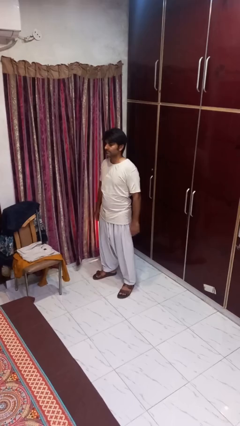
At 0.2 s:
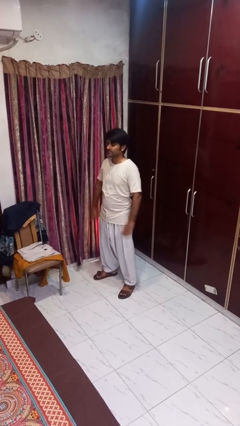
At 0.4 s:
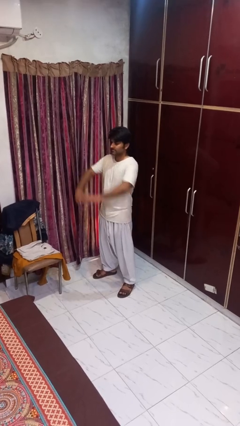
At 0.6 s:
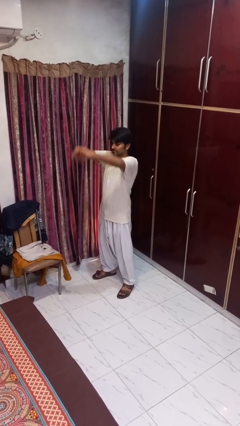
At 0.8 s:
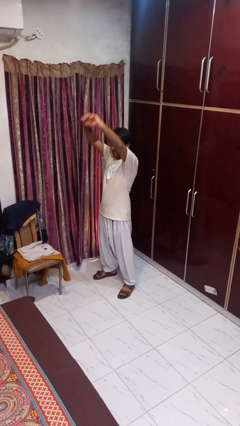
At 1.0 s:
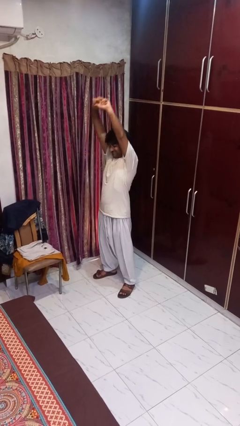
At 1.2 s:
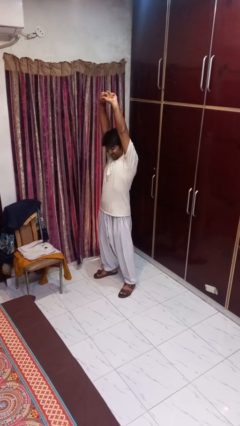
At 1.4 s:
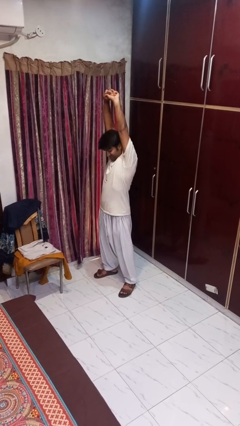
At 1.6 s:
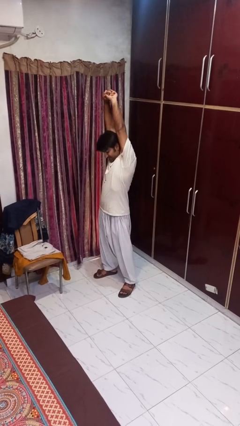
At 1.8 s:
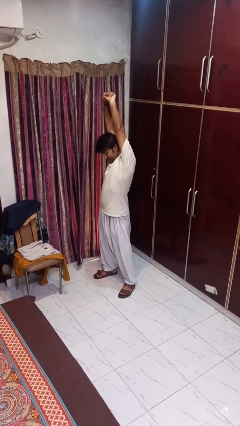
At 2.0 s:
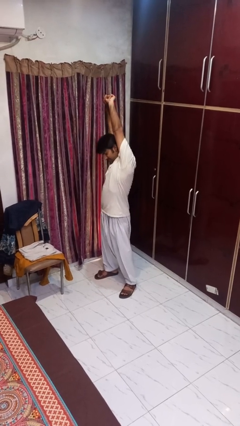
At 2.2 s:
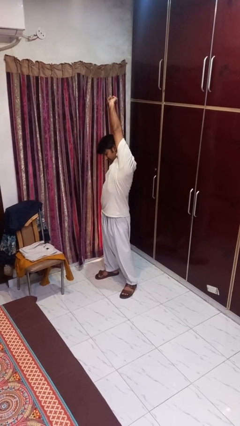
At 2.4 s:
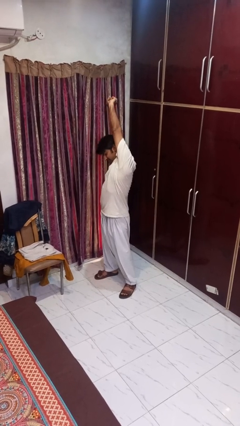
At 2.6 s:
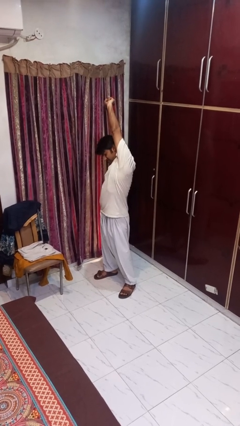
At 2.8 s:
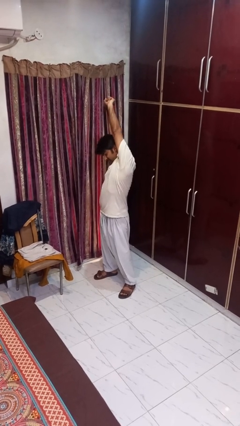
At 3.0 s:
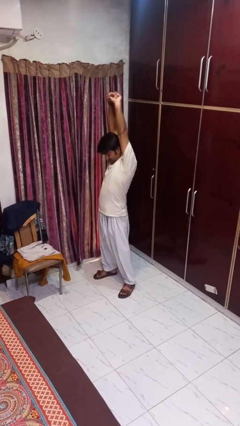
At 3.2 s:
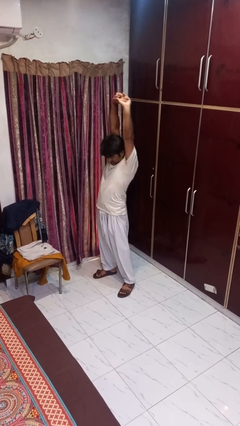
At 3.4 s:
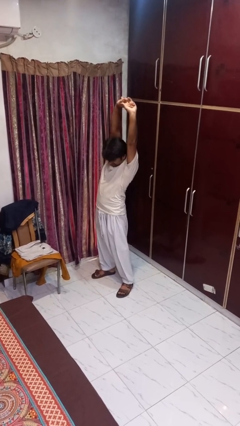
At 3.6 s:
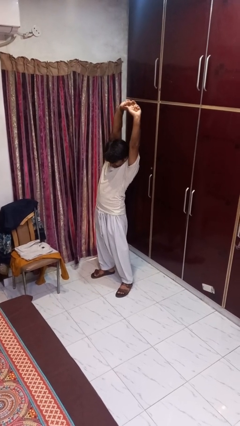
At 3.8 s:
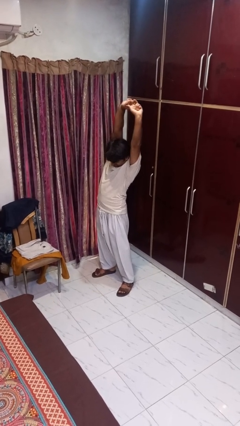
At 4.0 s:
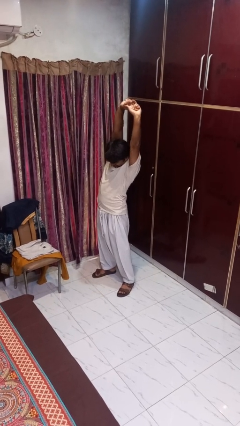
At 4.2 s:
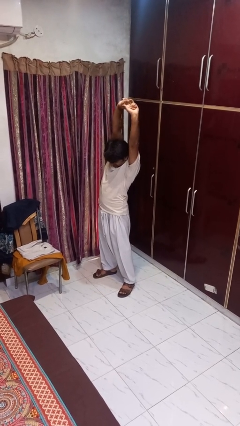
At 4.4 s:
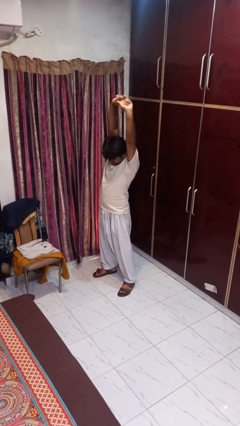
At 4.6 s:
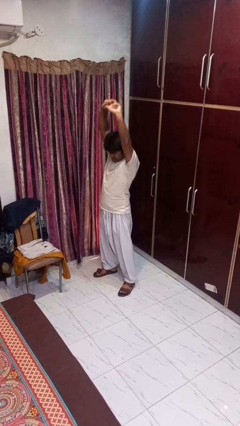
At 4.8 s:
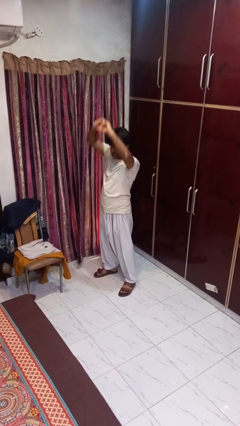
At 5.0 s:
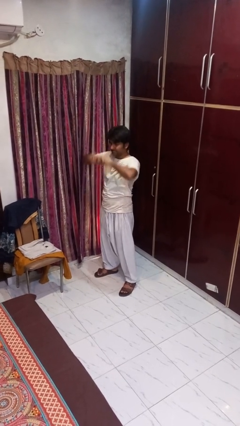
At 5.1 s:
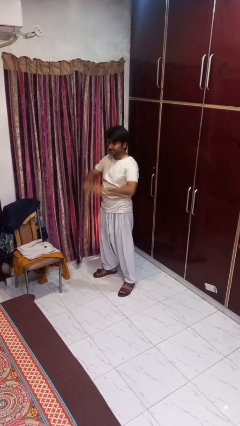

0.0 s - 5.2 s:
person stretches arms over head

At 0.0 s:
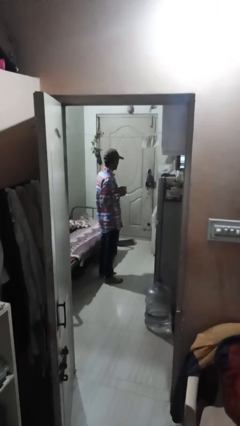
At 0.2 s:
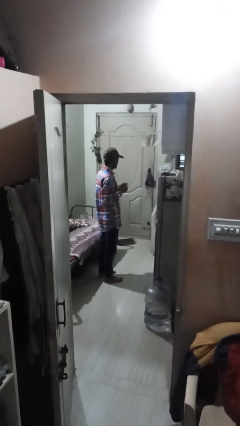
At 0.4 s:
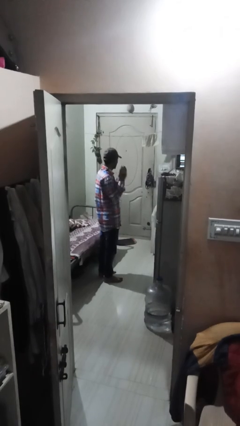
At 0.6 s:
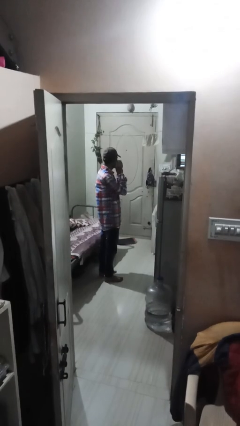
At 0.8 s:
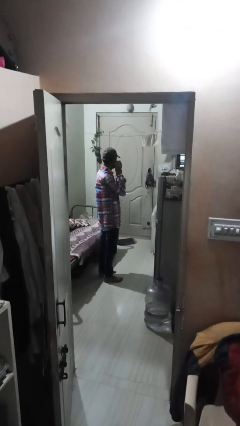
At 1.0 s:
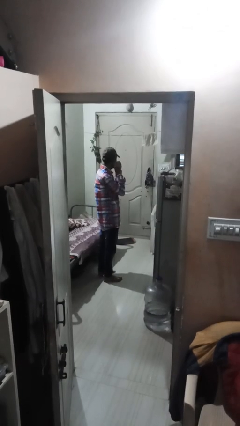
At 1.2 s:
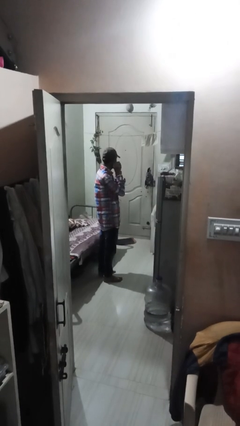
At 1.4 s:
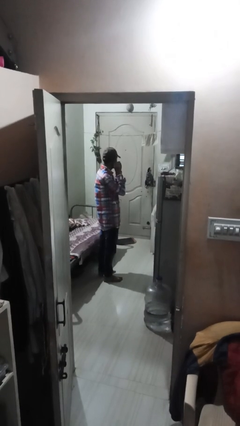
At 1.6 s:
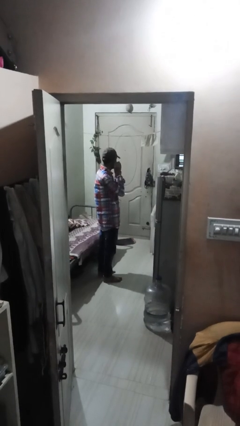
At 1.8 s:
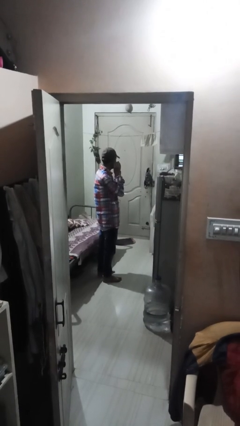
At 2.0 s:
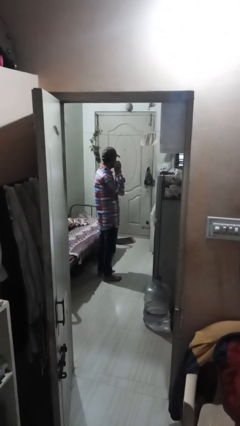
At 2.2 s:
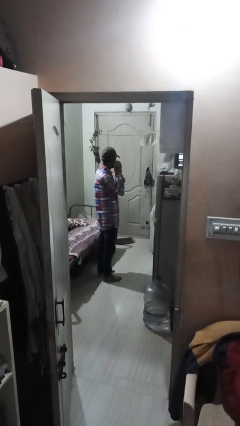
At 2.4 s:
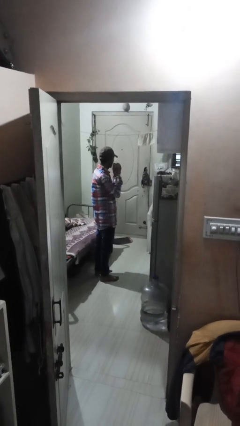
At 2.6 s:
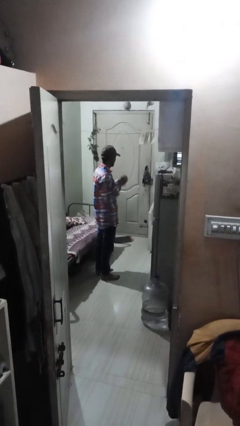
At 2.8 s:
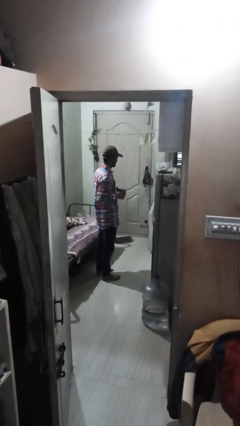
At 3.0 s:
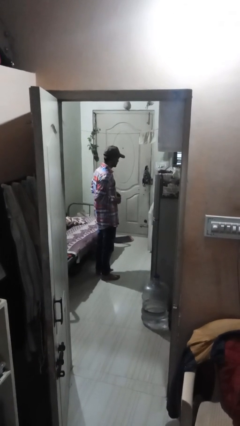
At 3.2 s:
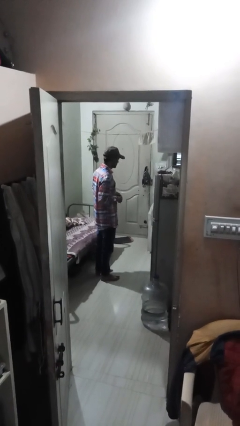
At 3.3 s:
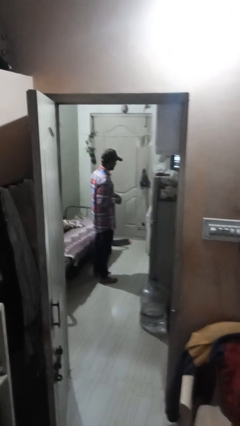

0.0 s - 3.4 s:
person takes off earrings

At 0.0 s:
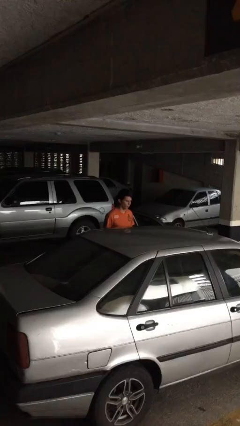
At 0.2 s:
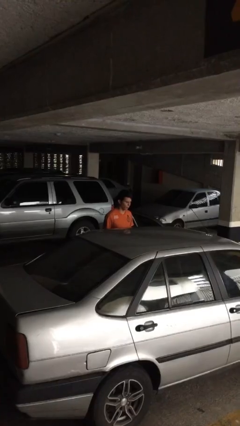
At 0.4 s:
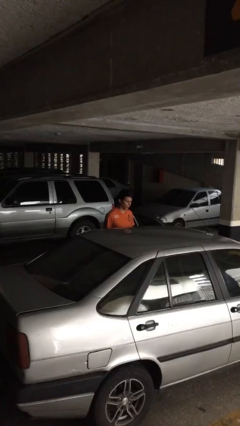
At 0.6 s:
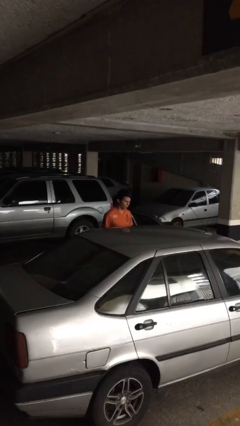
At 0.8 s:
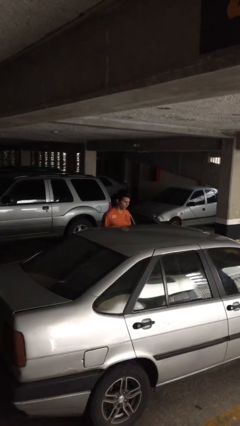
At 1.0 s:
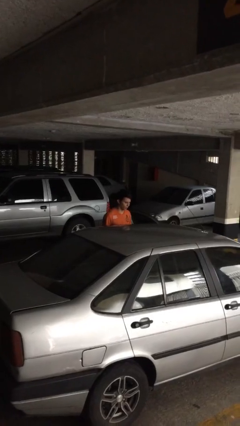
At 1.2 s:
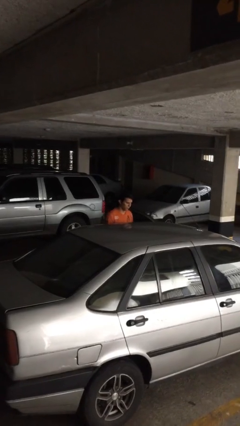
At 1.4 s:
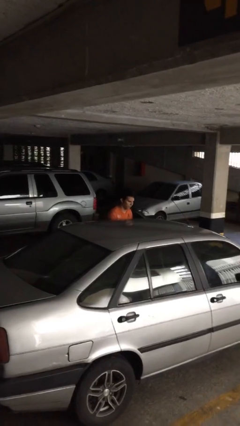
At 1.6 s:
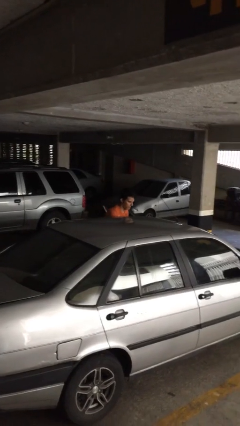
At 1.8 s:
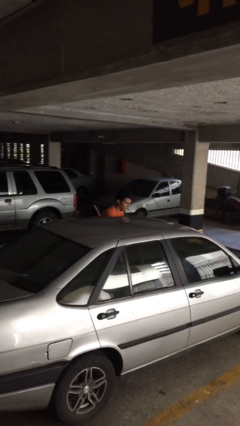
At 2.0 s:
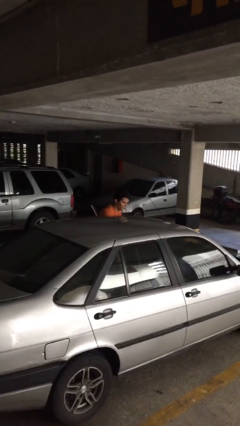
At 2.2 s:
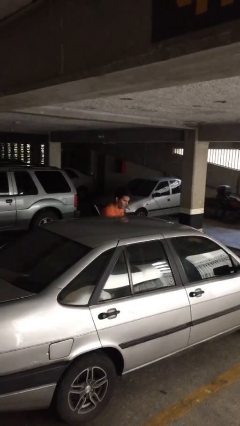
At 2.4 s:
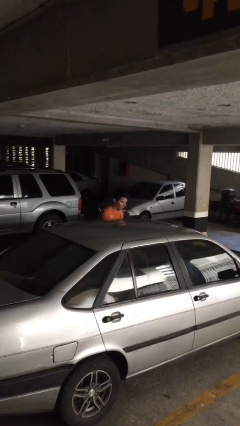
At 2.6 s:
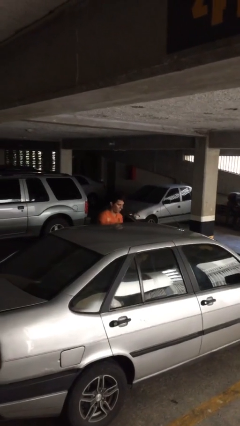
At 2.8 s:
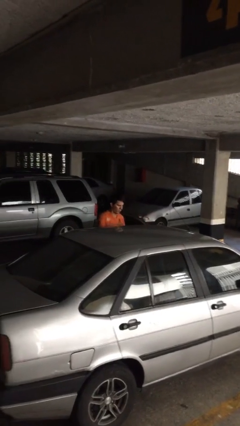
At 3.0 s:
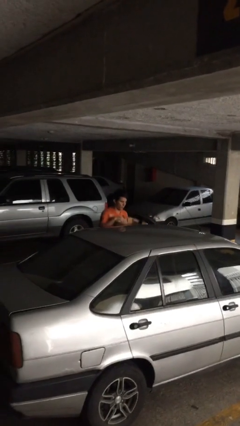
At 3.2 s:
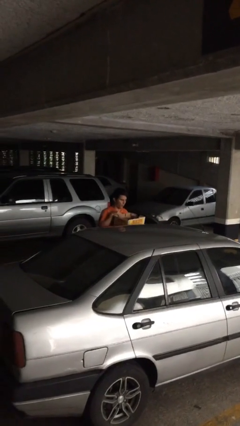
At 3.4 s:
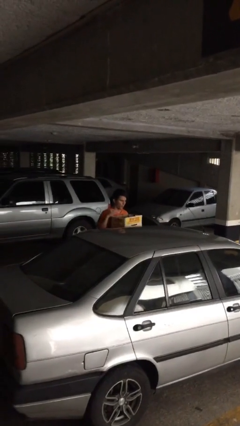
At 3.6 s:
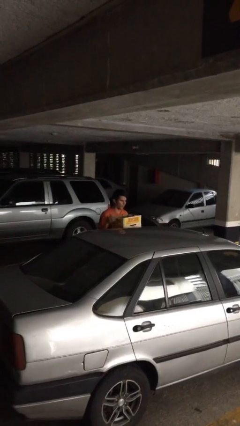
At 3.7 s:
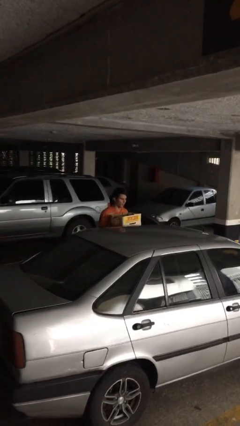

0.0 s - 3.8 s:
person unloads car

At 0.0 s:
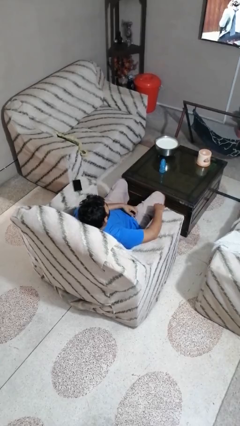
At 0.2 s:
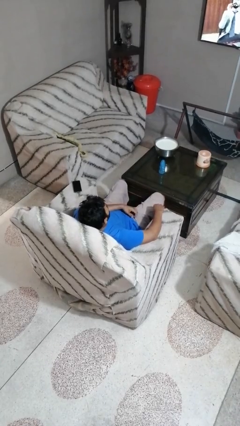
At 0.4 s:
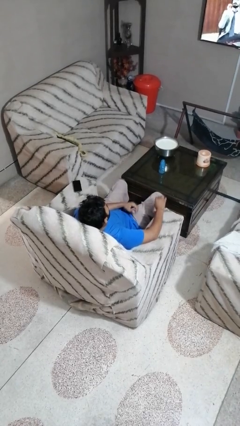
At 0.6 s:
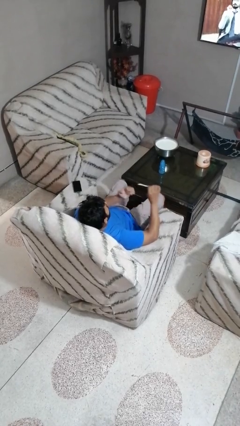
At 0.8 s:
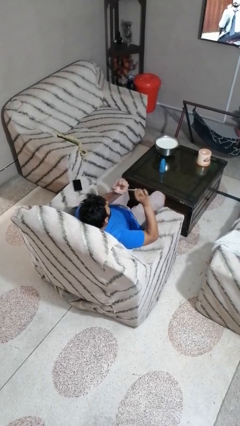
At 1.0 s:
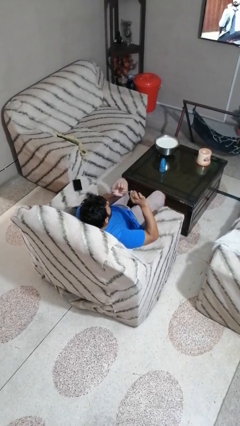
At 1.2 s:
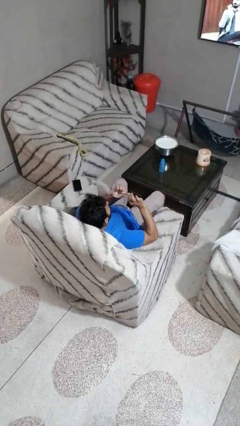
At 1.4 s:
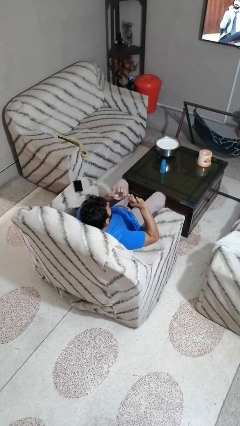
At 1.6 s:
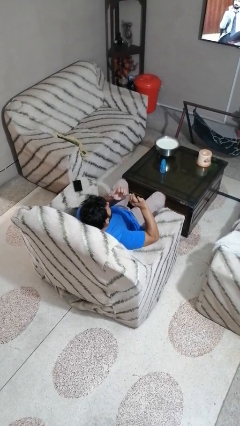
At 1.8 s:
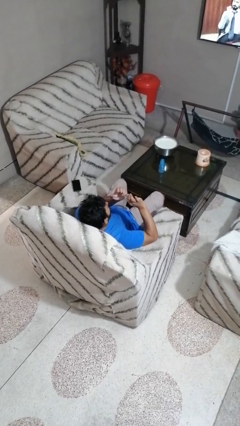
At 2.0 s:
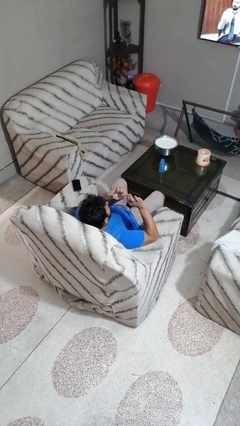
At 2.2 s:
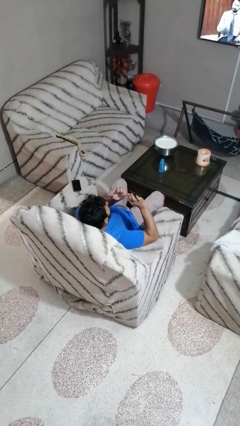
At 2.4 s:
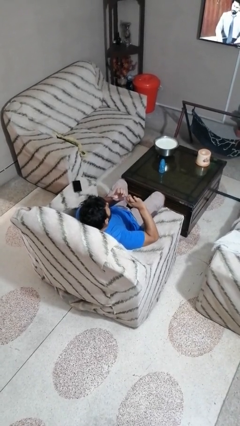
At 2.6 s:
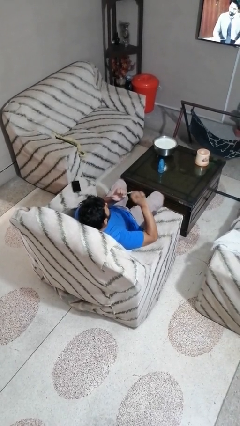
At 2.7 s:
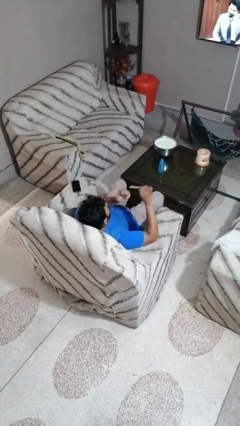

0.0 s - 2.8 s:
person files fingernails

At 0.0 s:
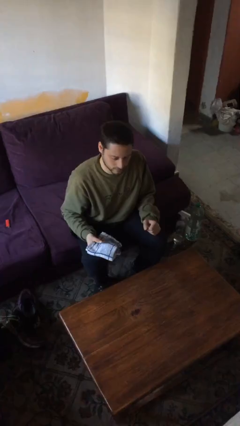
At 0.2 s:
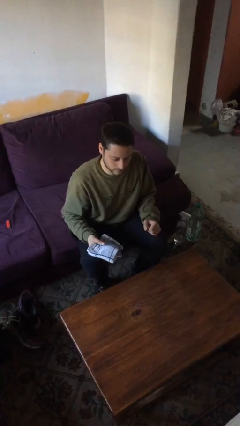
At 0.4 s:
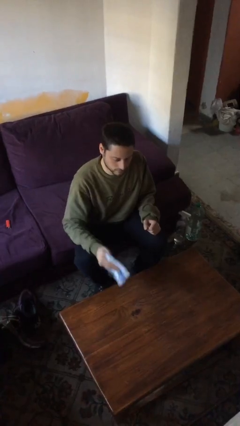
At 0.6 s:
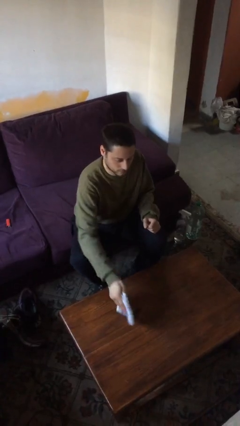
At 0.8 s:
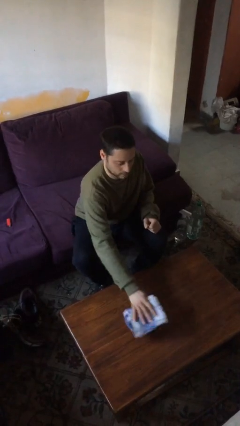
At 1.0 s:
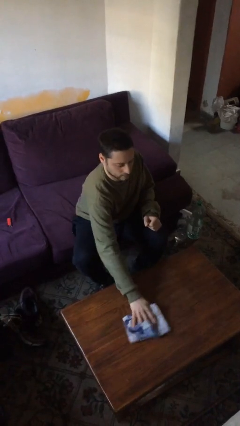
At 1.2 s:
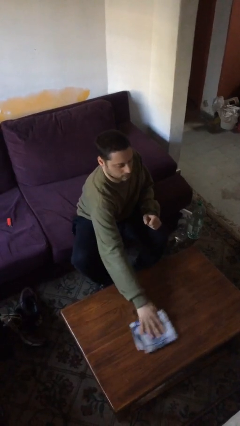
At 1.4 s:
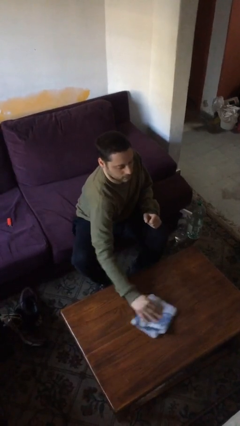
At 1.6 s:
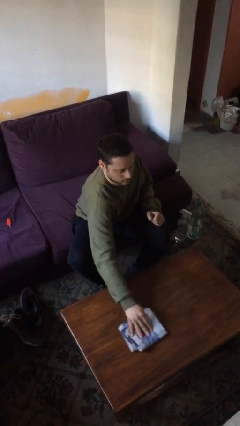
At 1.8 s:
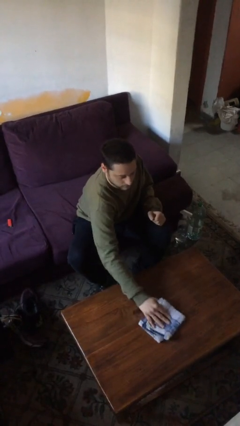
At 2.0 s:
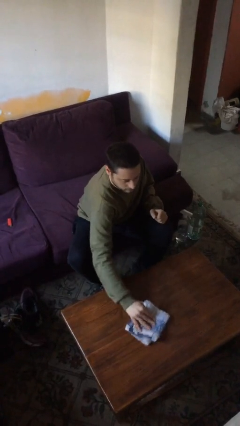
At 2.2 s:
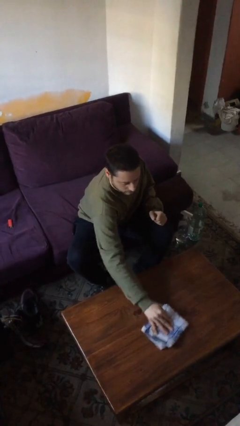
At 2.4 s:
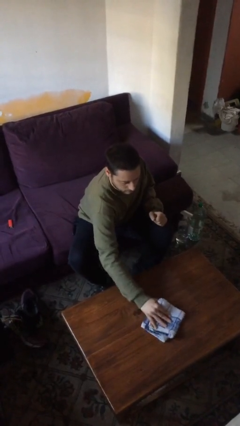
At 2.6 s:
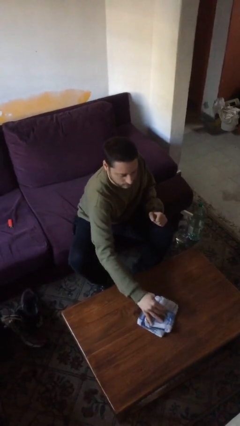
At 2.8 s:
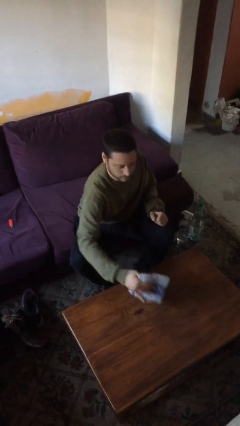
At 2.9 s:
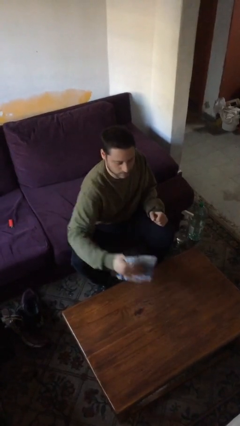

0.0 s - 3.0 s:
person cleans table with rag
